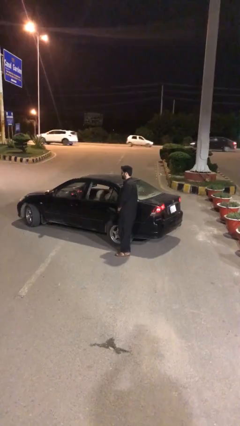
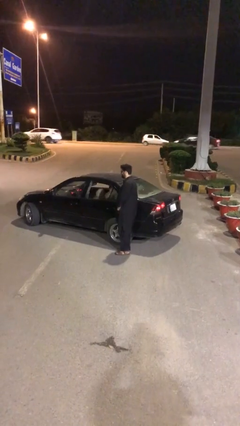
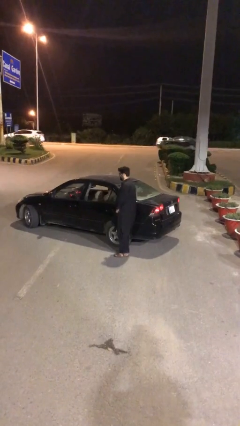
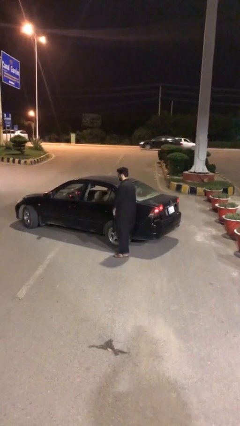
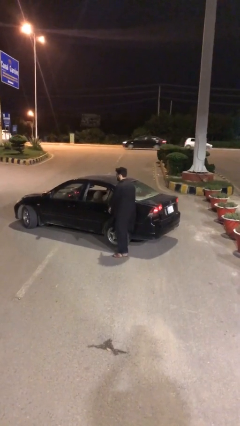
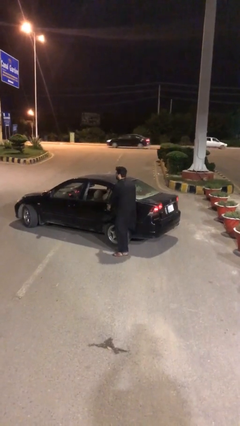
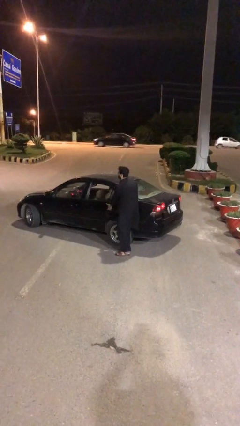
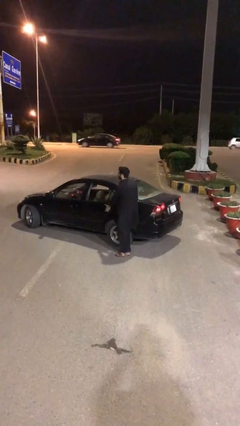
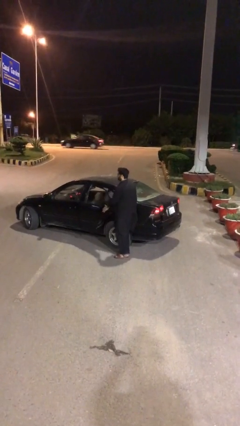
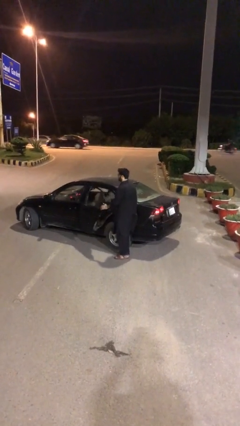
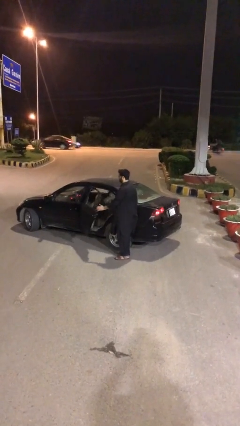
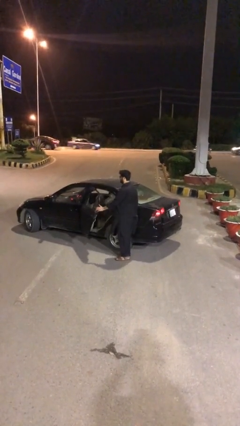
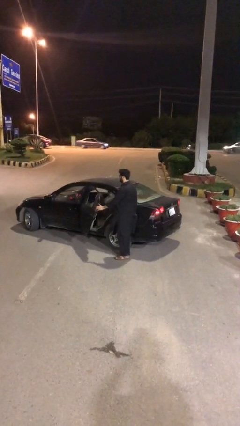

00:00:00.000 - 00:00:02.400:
person opens car door

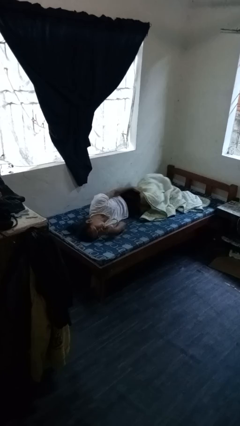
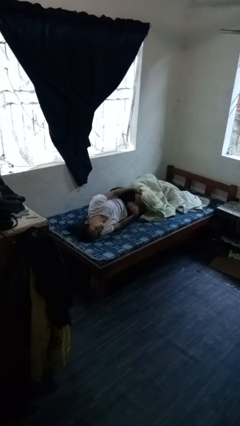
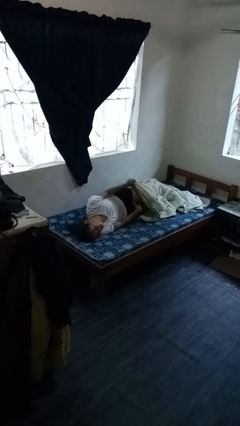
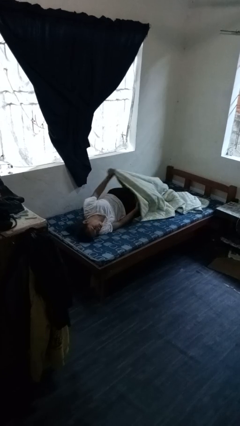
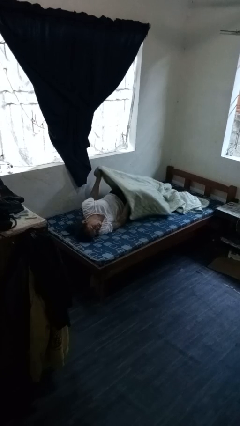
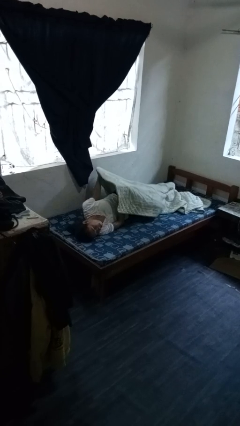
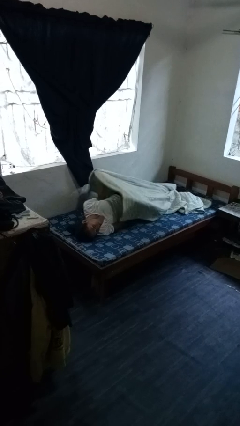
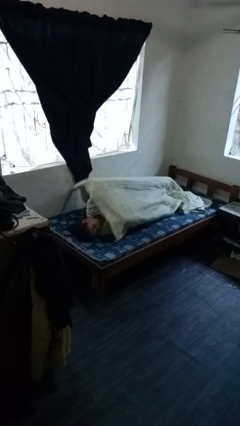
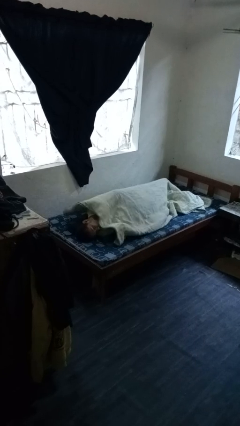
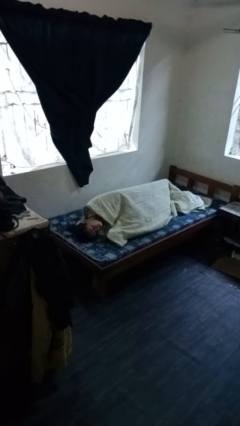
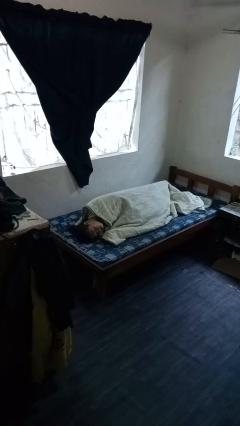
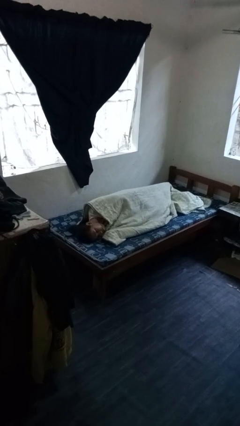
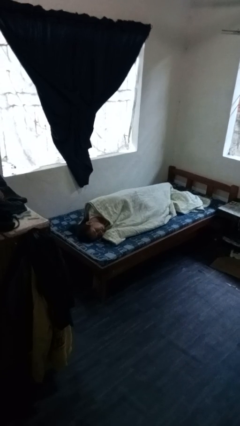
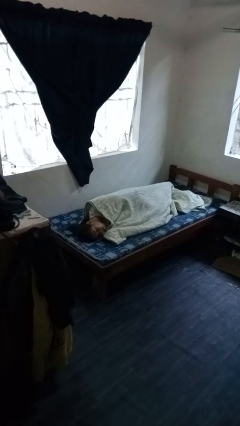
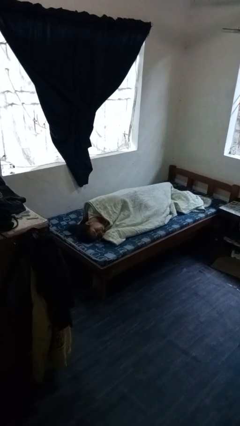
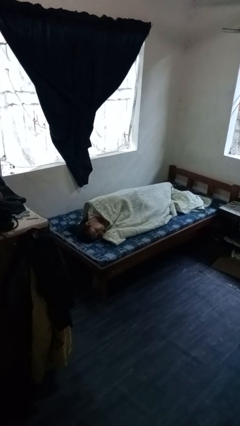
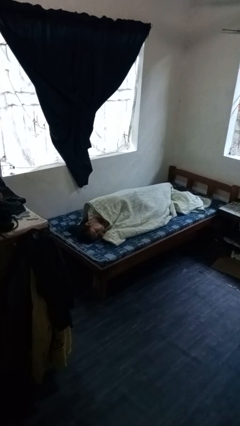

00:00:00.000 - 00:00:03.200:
person covers with bedsheets

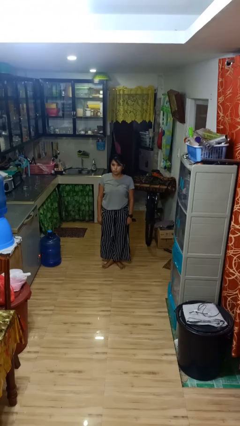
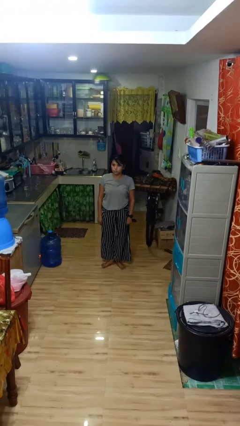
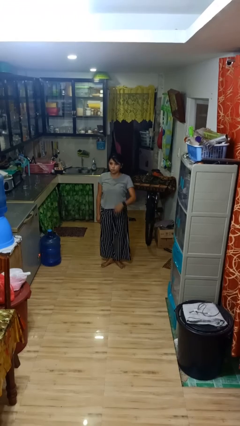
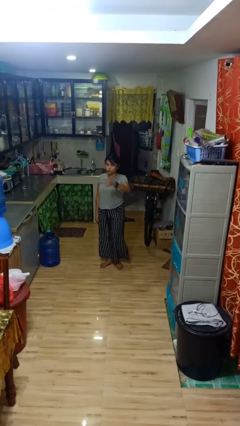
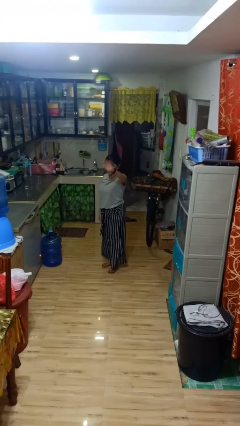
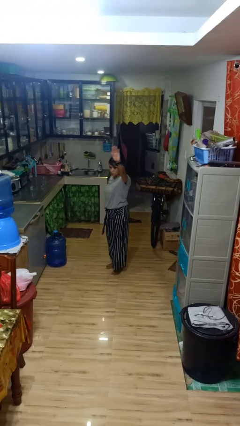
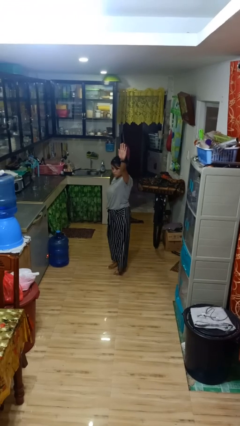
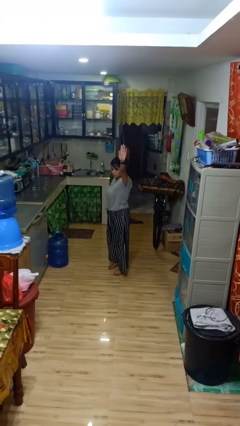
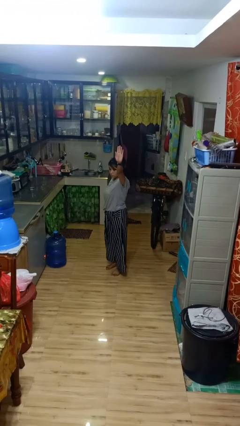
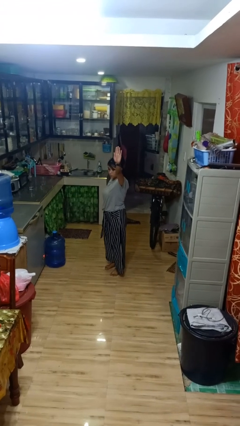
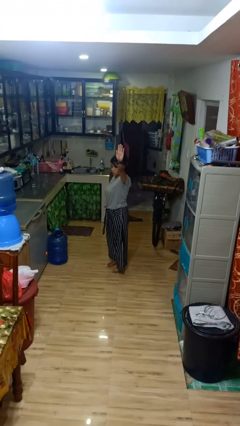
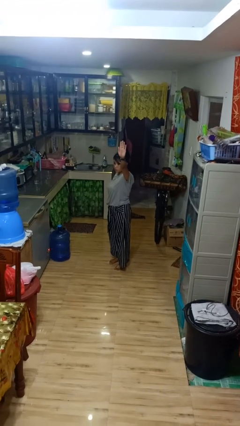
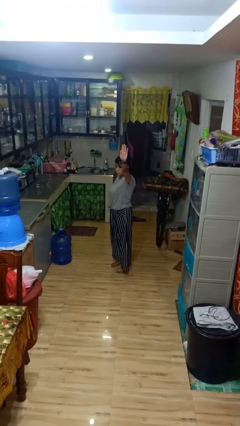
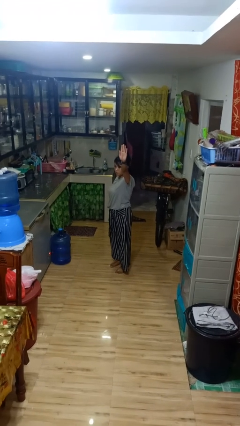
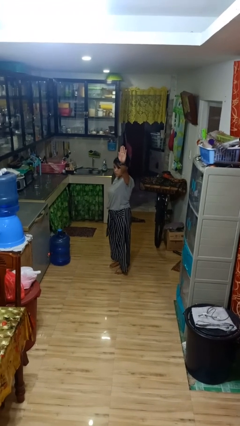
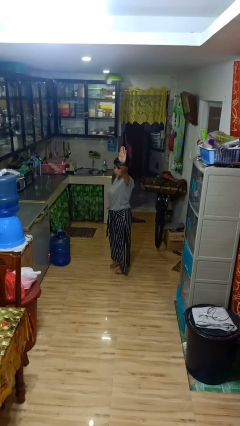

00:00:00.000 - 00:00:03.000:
person gestures stop

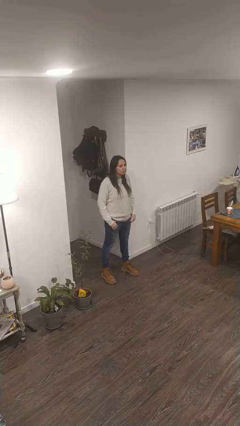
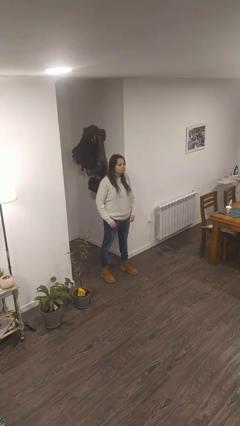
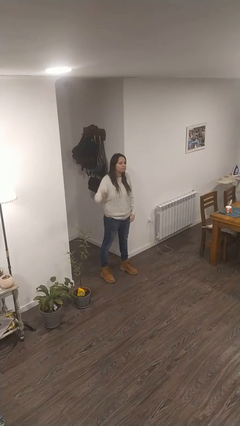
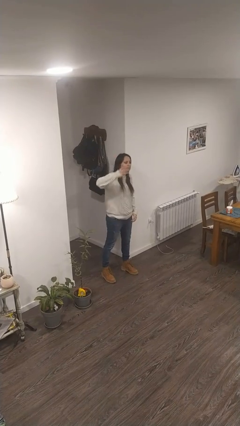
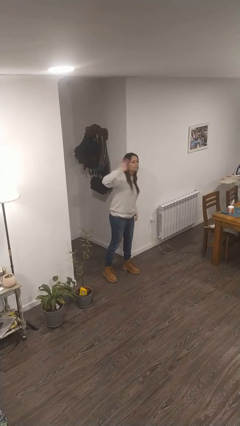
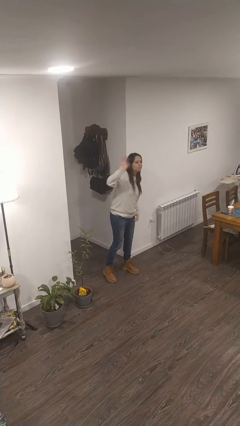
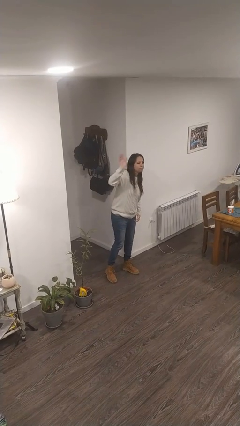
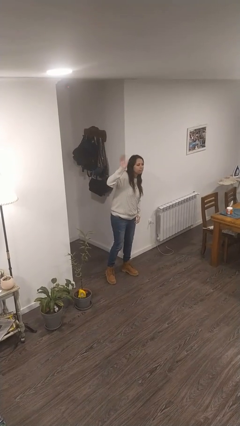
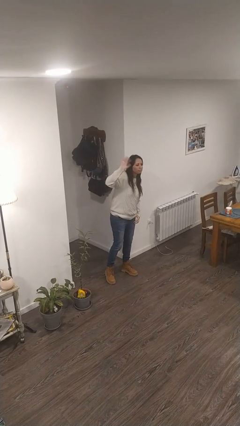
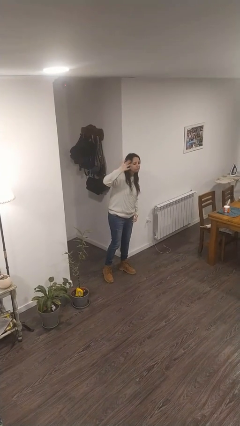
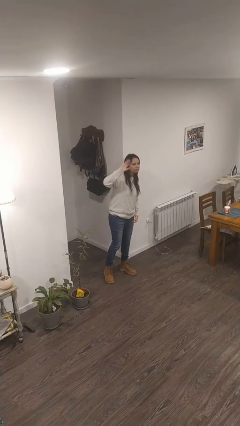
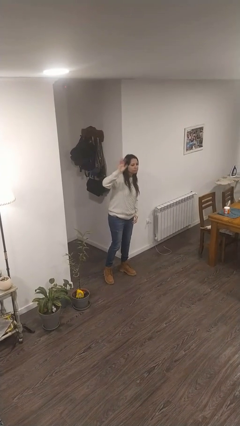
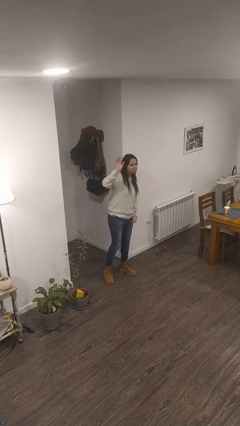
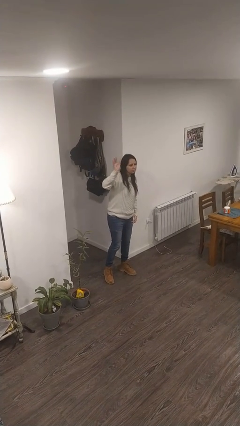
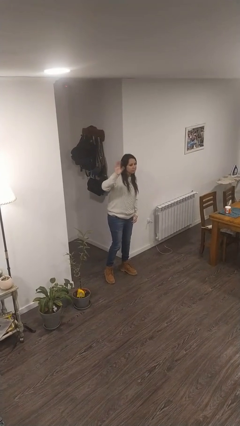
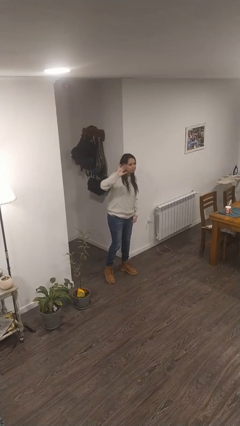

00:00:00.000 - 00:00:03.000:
person waves at person

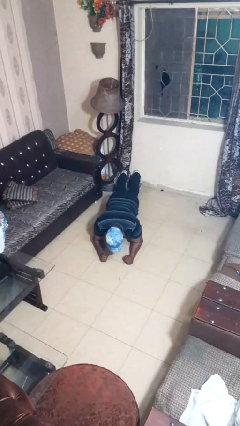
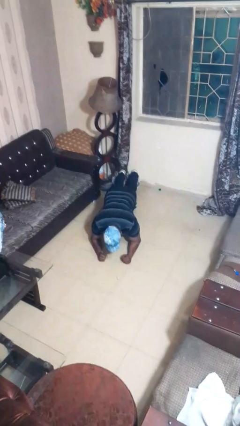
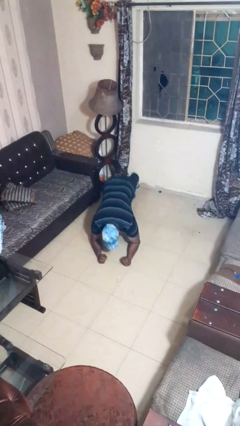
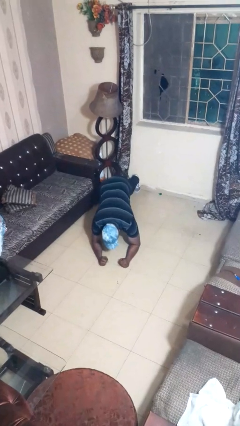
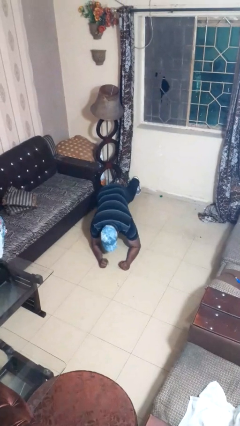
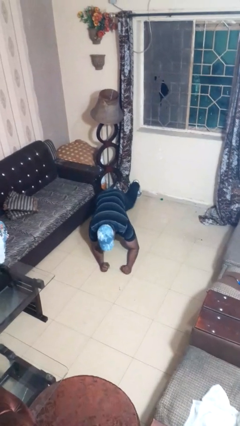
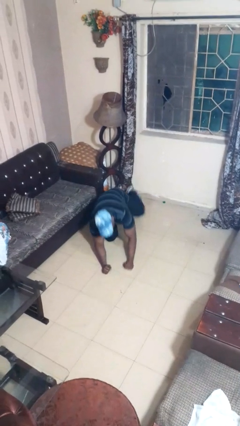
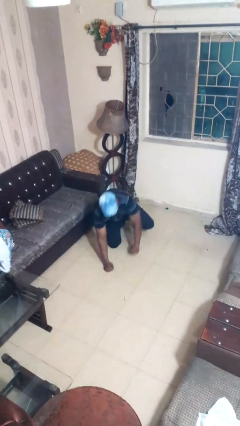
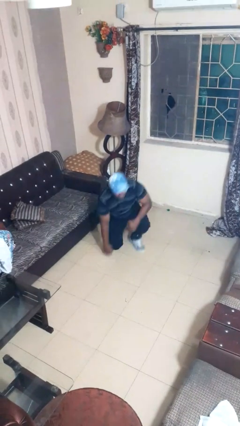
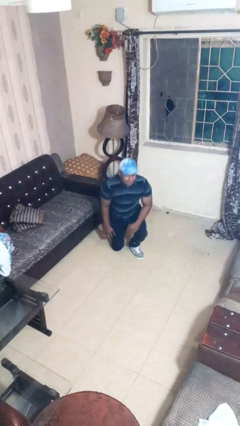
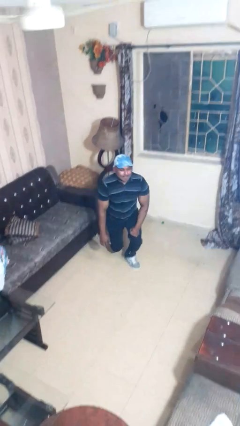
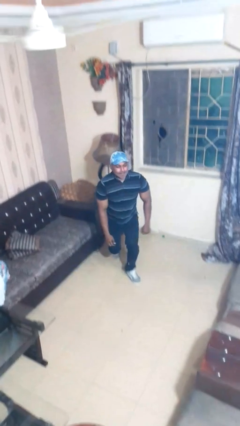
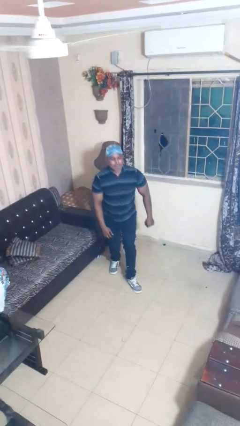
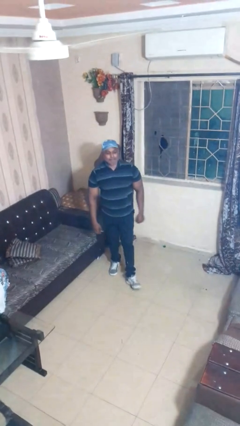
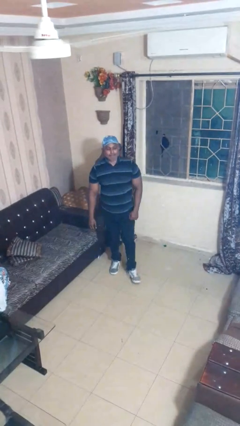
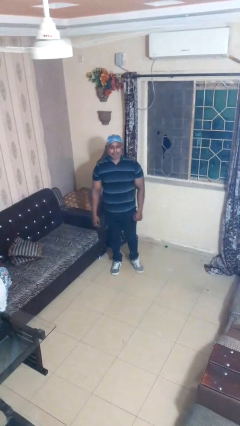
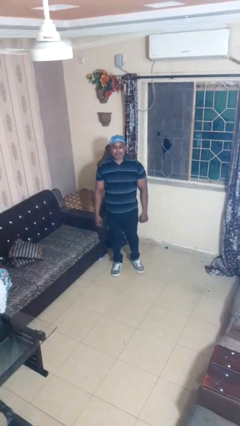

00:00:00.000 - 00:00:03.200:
person stands up from floor

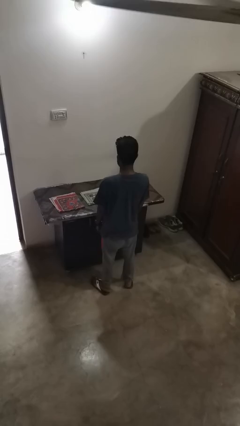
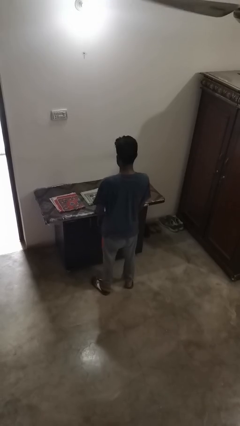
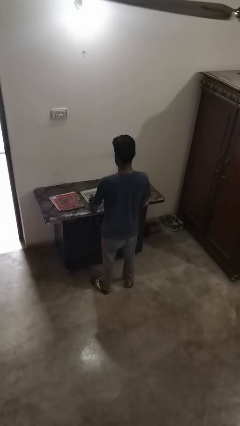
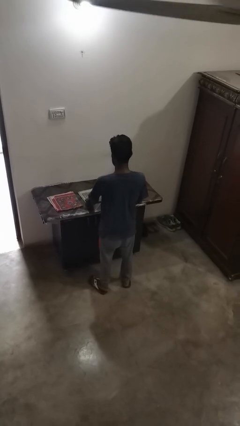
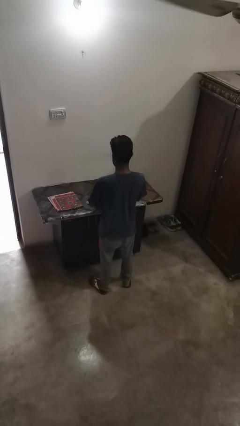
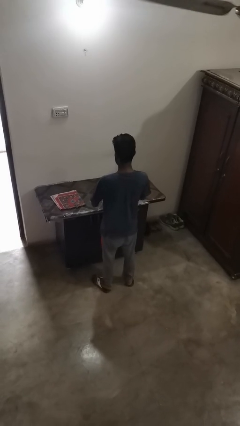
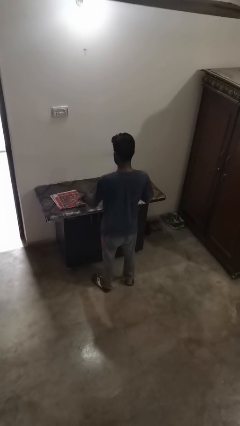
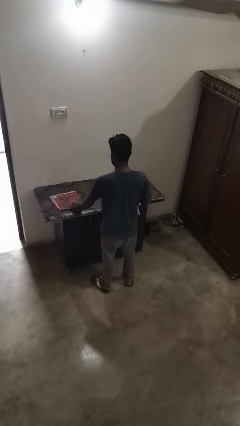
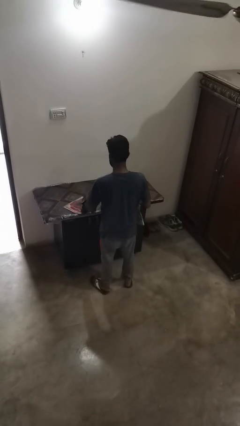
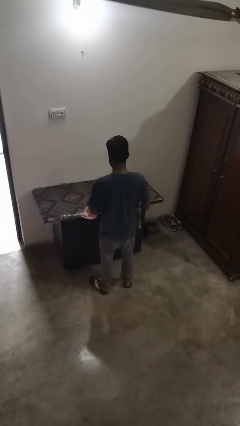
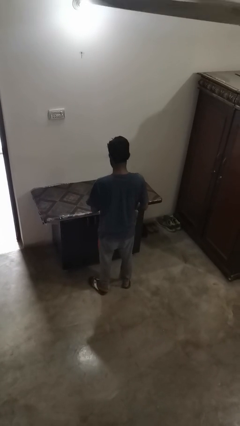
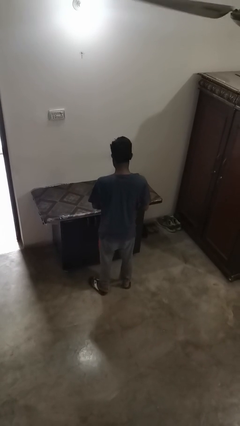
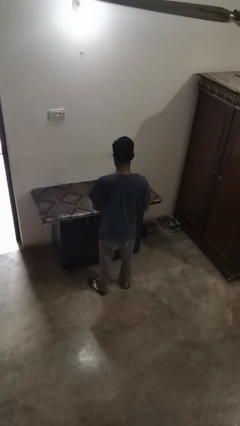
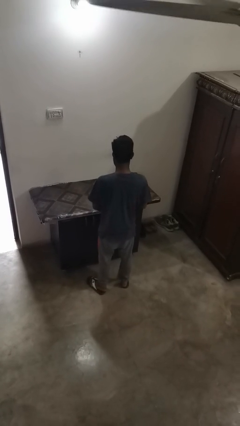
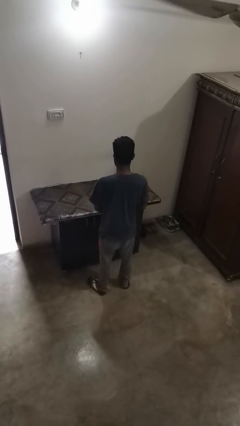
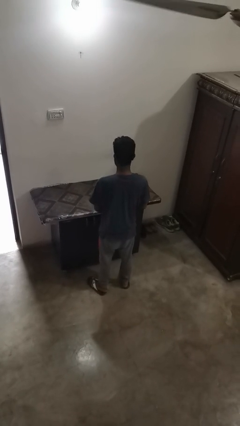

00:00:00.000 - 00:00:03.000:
person folds tablecloth
